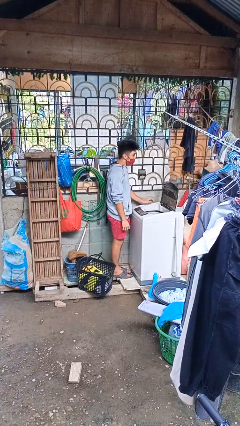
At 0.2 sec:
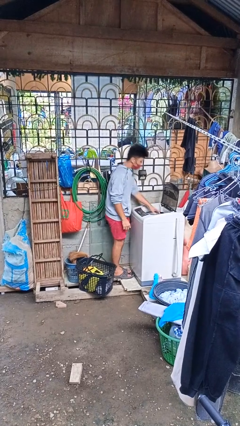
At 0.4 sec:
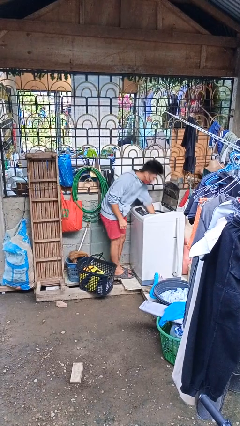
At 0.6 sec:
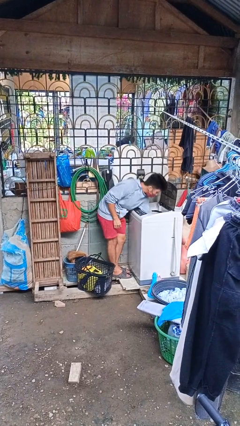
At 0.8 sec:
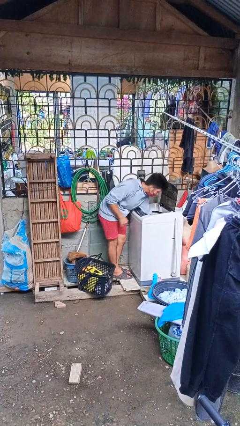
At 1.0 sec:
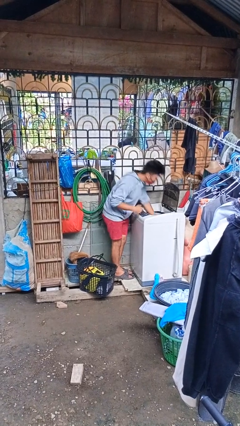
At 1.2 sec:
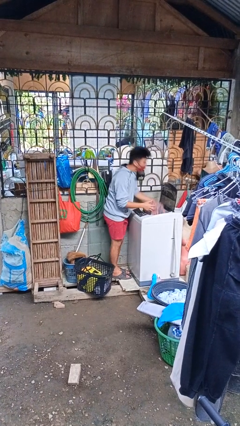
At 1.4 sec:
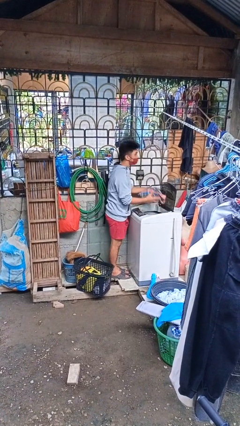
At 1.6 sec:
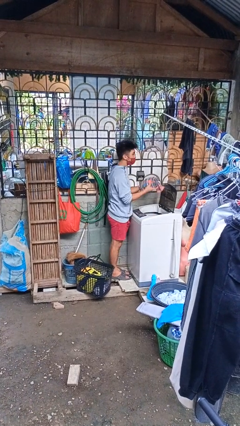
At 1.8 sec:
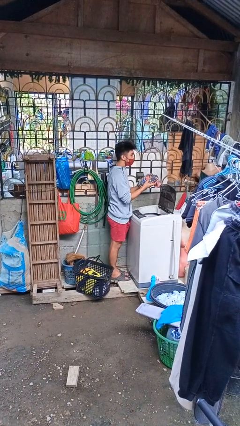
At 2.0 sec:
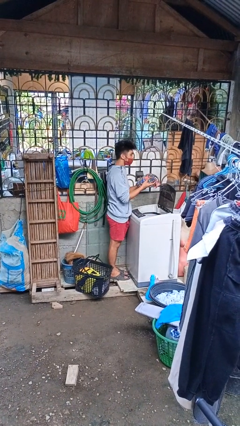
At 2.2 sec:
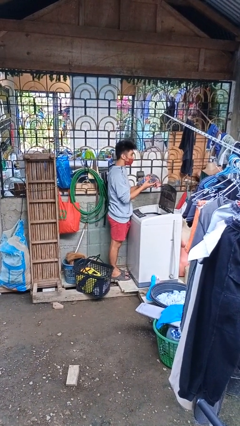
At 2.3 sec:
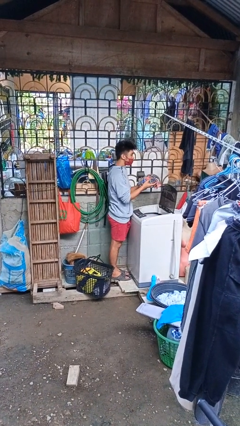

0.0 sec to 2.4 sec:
person unloads clotheswasher

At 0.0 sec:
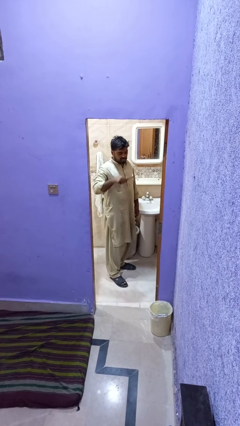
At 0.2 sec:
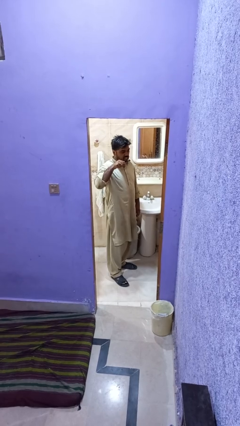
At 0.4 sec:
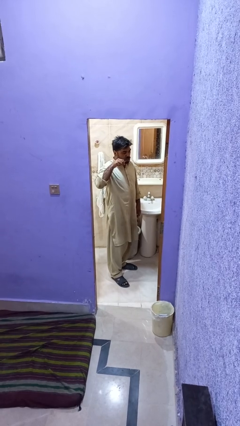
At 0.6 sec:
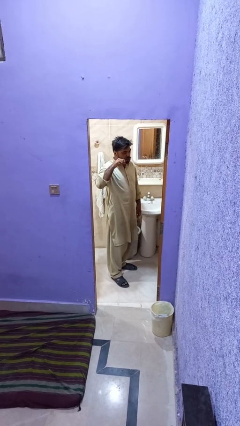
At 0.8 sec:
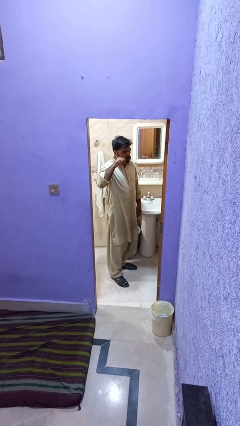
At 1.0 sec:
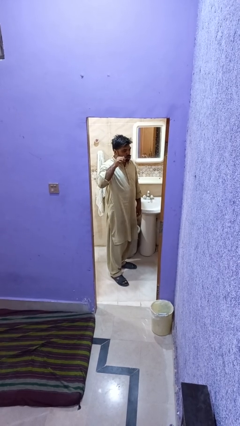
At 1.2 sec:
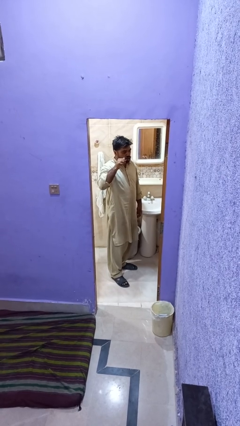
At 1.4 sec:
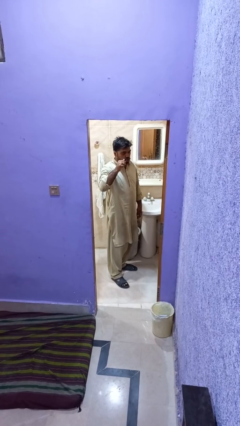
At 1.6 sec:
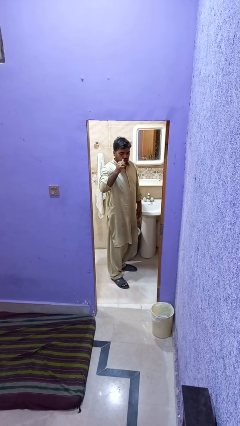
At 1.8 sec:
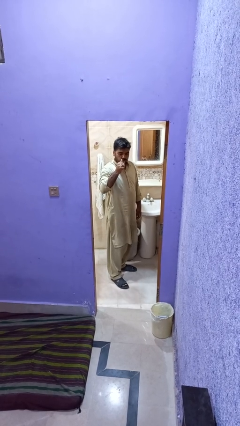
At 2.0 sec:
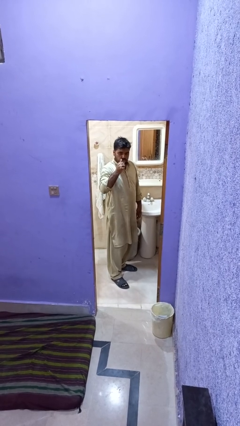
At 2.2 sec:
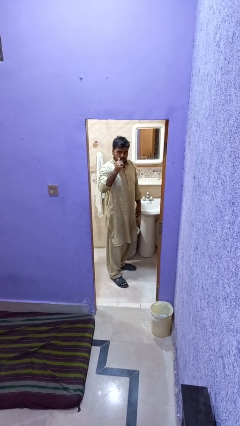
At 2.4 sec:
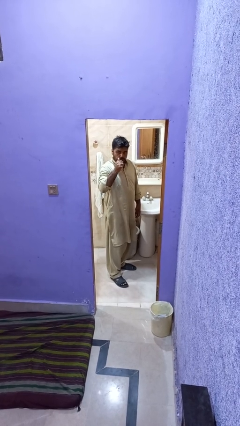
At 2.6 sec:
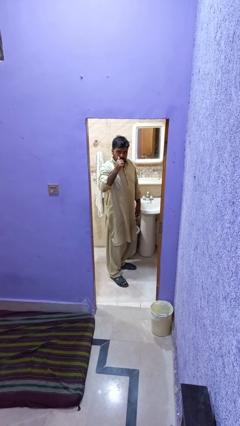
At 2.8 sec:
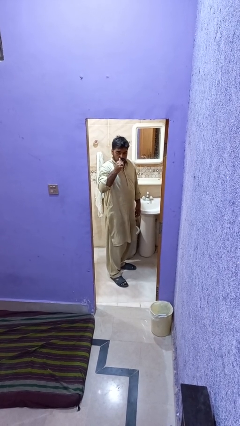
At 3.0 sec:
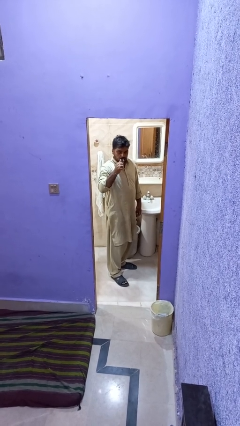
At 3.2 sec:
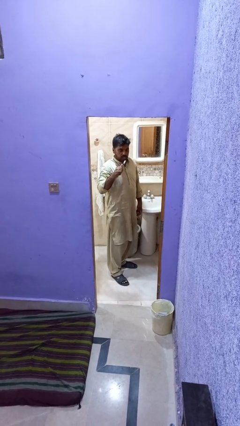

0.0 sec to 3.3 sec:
person brushes teeth

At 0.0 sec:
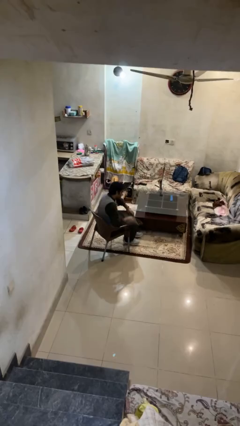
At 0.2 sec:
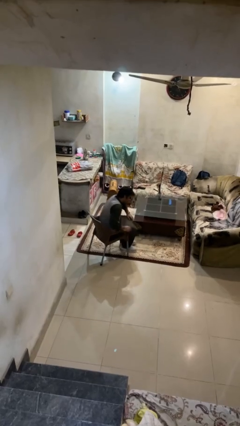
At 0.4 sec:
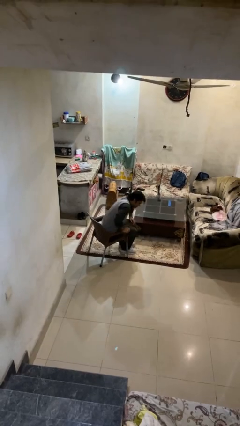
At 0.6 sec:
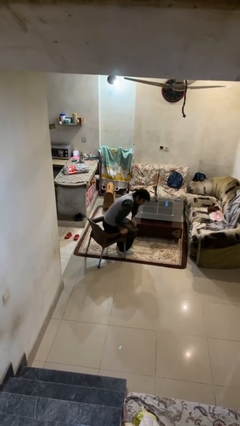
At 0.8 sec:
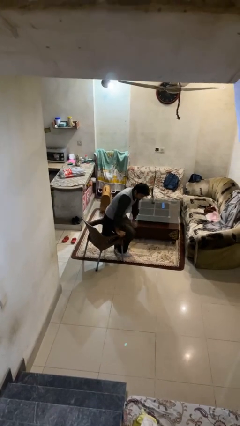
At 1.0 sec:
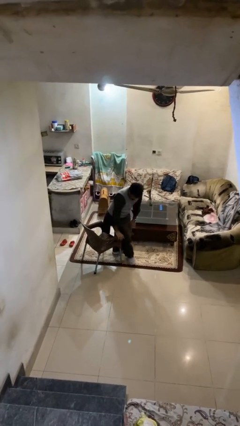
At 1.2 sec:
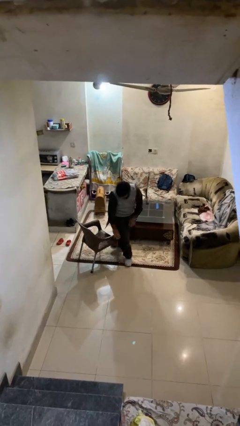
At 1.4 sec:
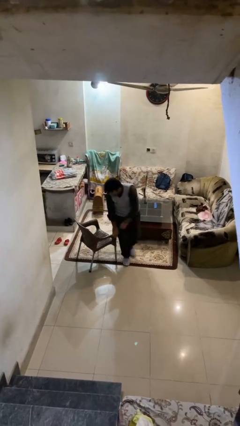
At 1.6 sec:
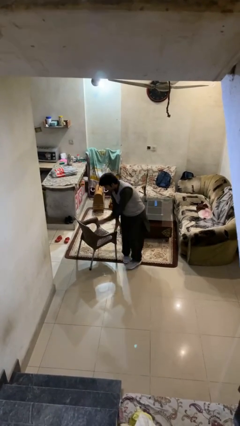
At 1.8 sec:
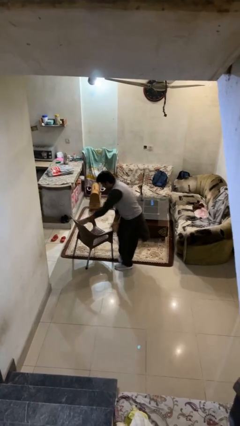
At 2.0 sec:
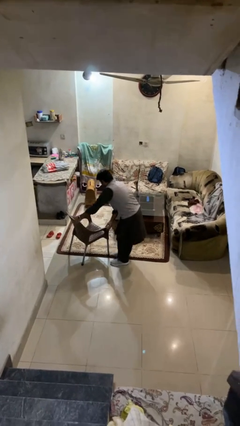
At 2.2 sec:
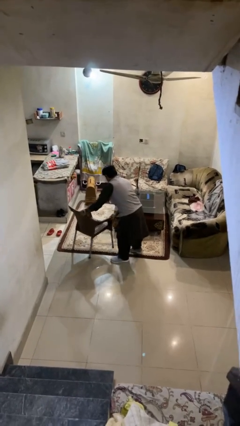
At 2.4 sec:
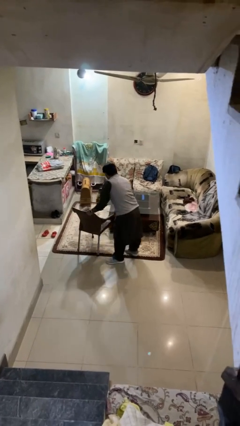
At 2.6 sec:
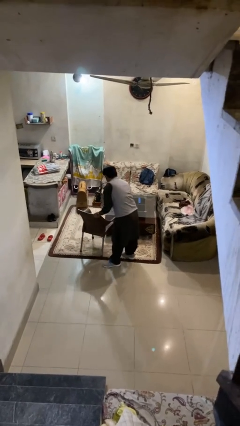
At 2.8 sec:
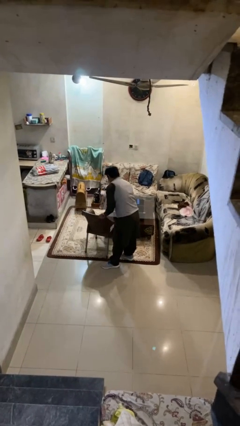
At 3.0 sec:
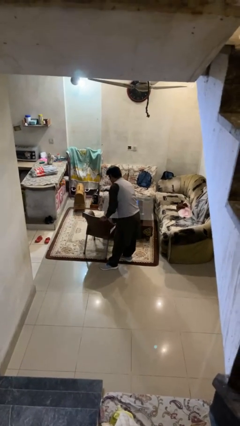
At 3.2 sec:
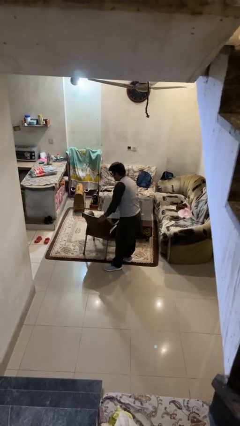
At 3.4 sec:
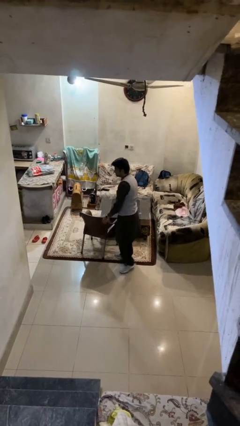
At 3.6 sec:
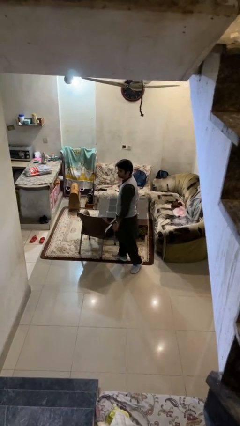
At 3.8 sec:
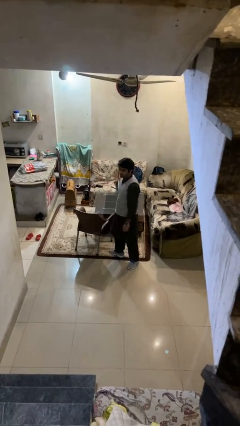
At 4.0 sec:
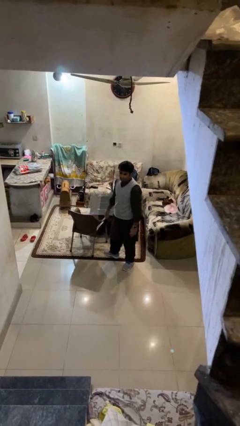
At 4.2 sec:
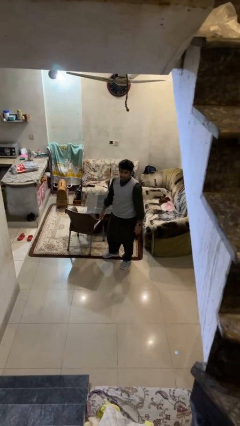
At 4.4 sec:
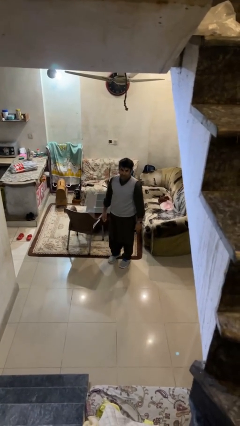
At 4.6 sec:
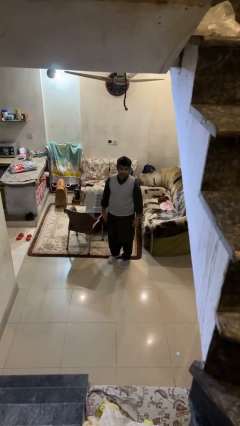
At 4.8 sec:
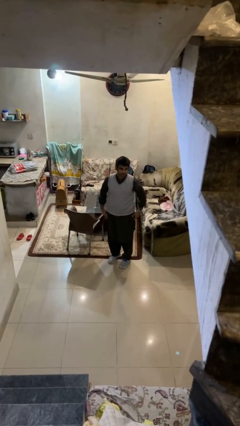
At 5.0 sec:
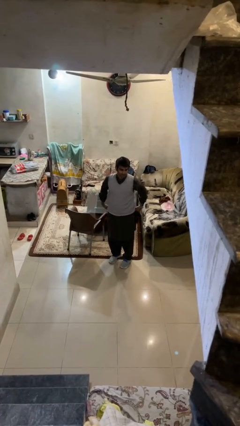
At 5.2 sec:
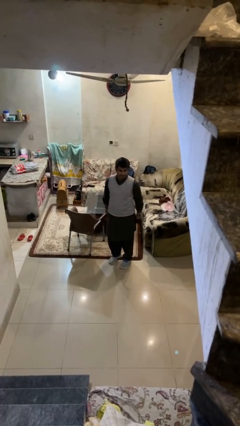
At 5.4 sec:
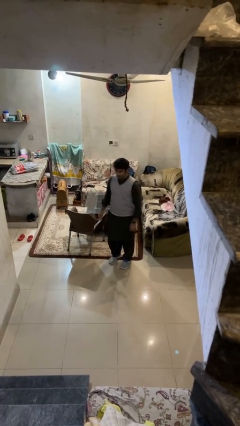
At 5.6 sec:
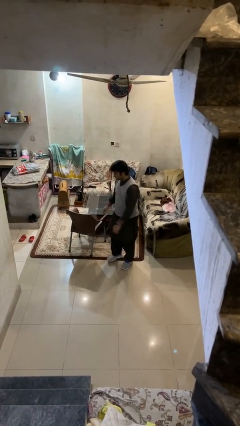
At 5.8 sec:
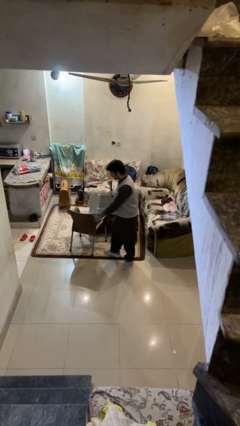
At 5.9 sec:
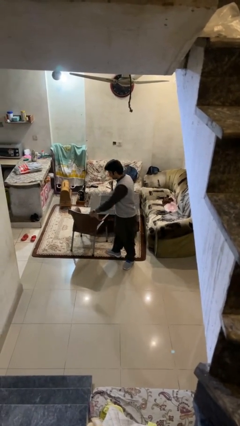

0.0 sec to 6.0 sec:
person stands up

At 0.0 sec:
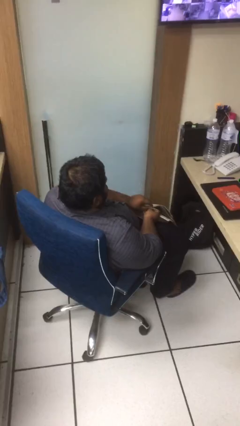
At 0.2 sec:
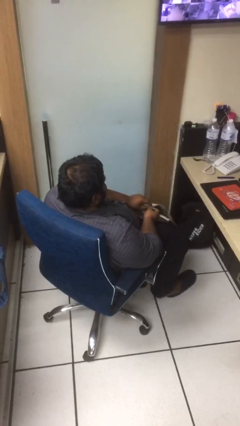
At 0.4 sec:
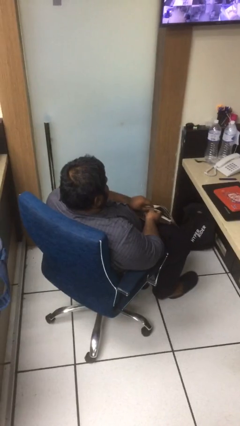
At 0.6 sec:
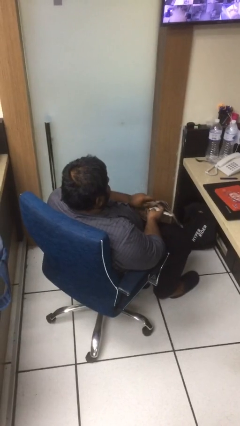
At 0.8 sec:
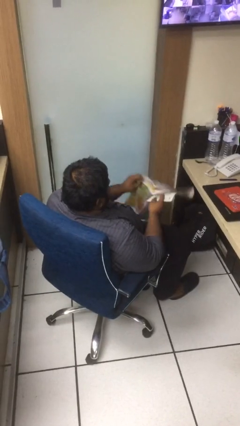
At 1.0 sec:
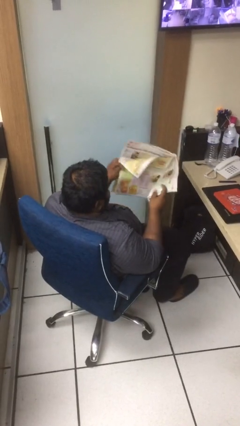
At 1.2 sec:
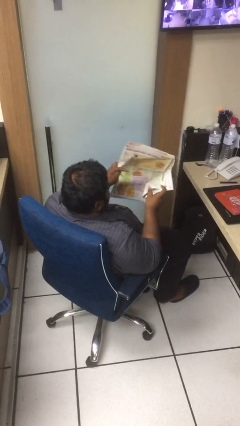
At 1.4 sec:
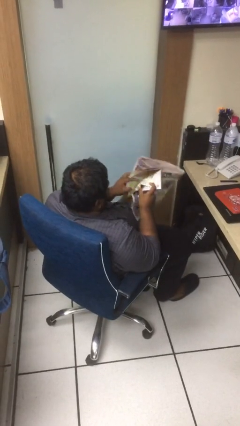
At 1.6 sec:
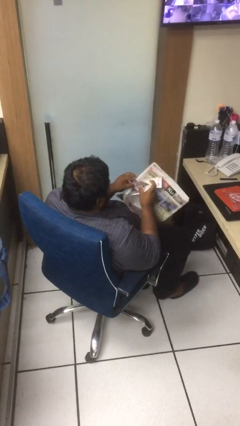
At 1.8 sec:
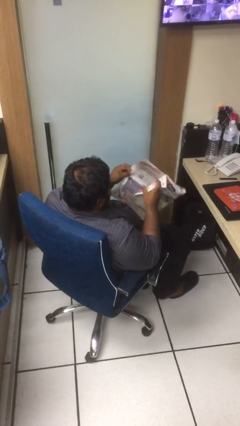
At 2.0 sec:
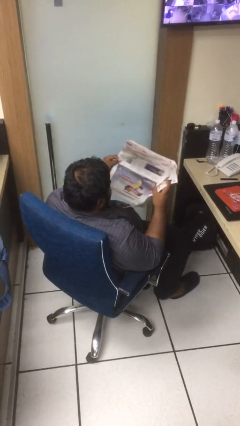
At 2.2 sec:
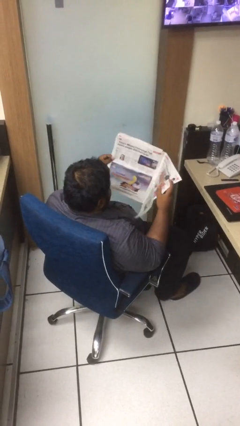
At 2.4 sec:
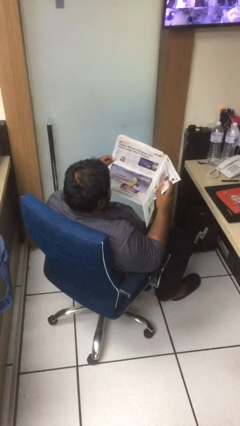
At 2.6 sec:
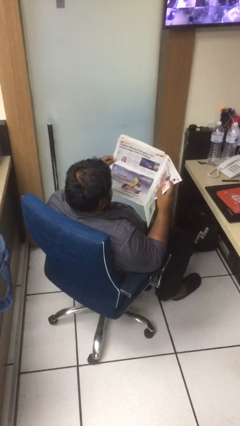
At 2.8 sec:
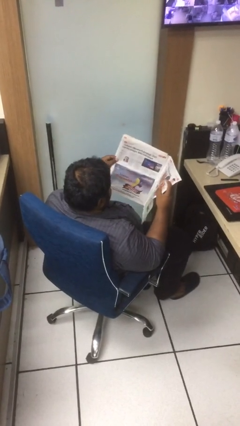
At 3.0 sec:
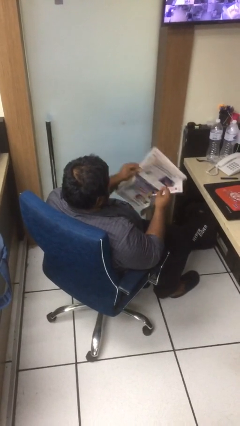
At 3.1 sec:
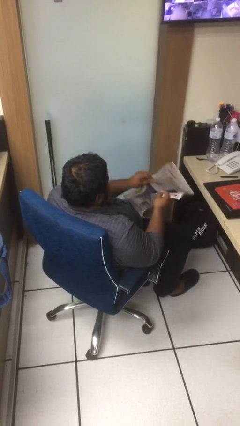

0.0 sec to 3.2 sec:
person reads newspaper

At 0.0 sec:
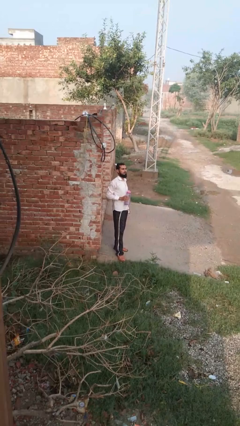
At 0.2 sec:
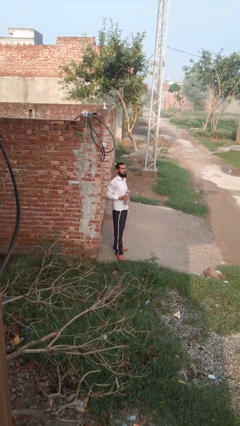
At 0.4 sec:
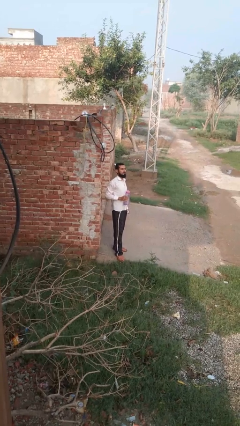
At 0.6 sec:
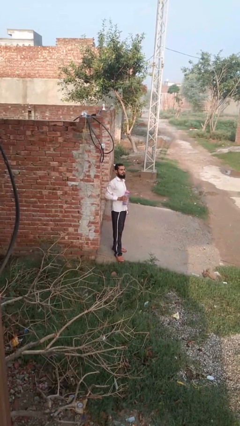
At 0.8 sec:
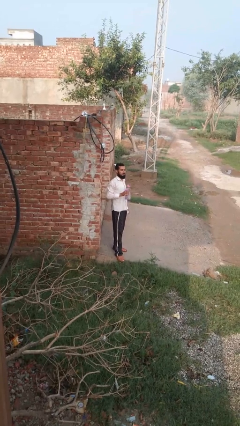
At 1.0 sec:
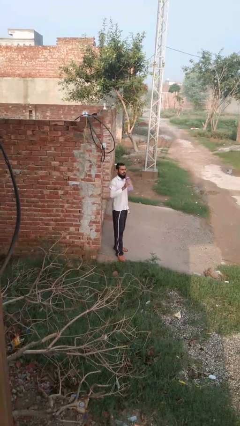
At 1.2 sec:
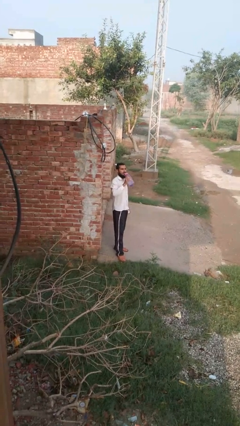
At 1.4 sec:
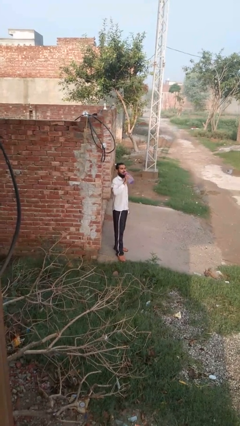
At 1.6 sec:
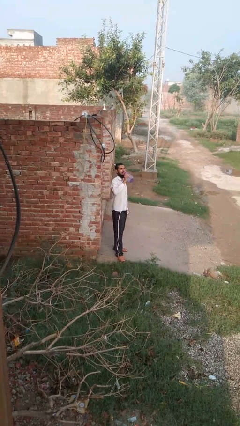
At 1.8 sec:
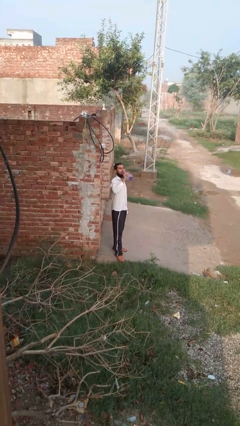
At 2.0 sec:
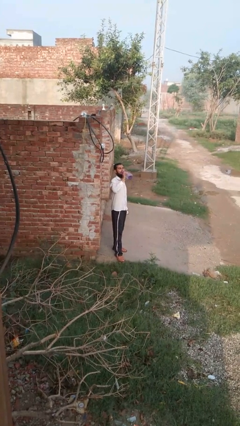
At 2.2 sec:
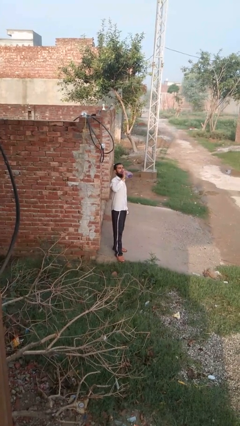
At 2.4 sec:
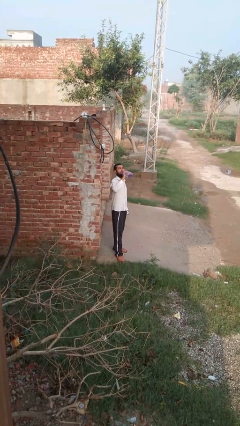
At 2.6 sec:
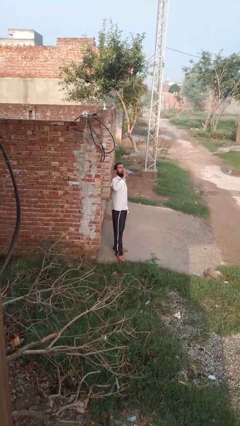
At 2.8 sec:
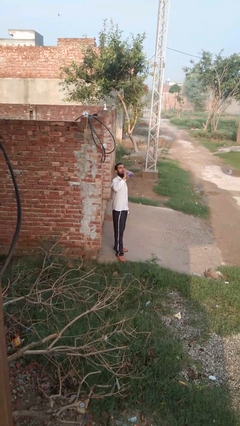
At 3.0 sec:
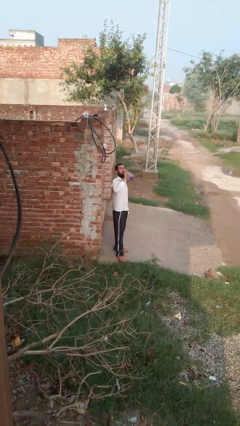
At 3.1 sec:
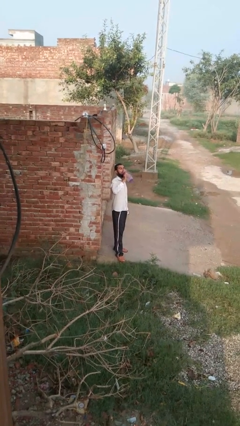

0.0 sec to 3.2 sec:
person drinks from bottle
